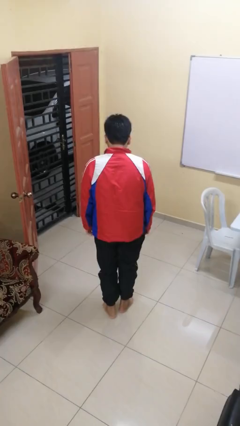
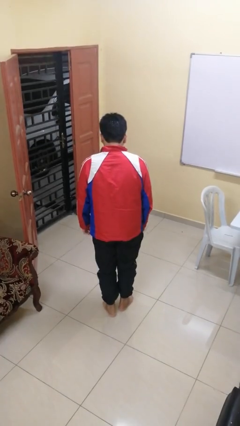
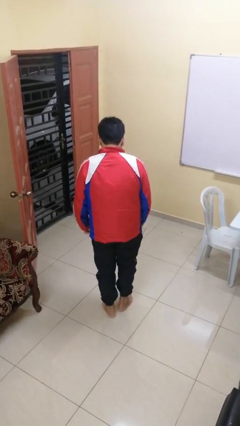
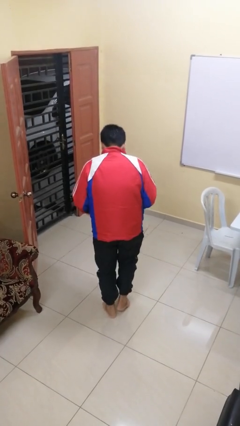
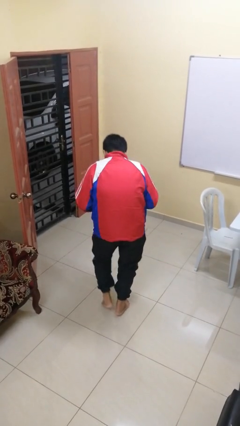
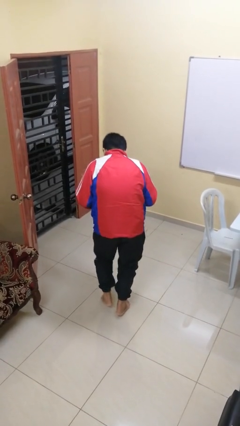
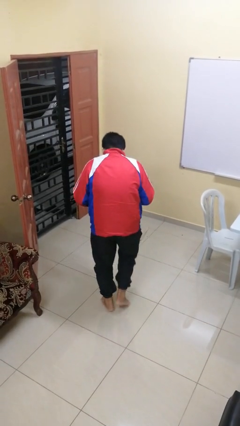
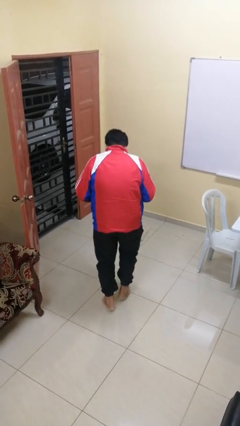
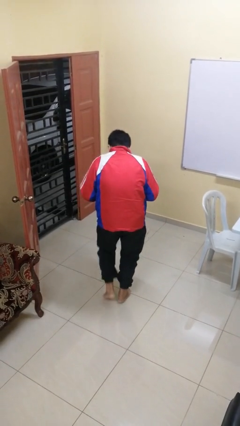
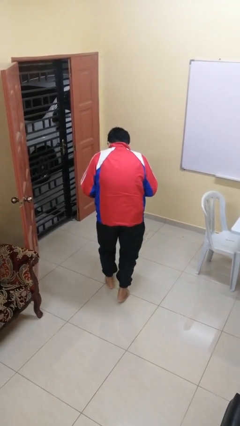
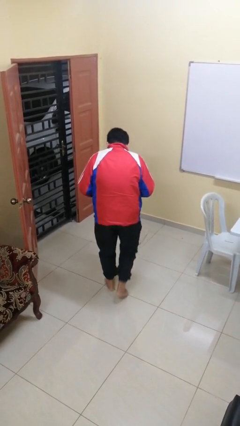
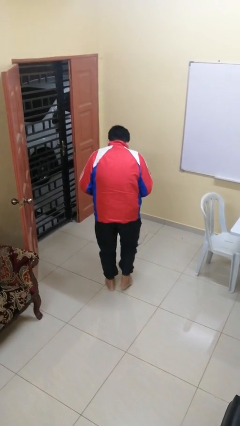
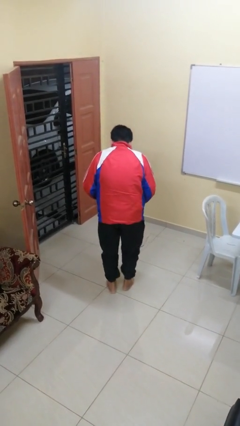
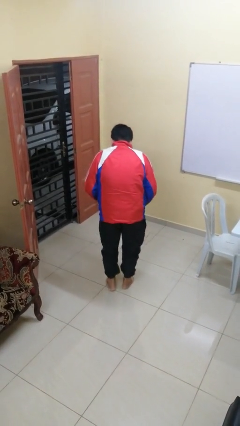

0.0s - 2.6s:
person walks tiptoe

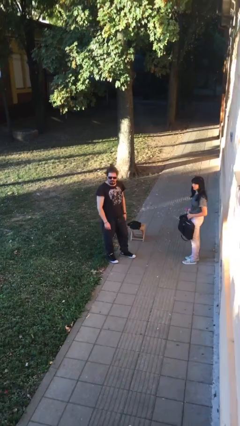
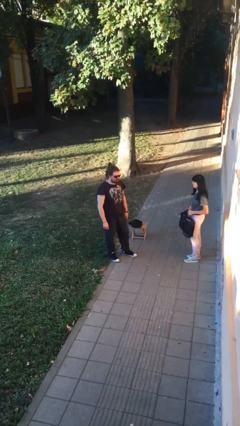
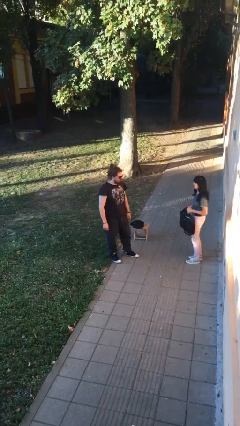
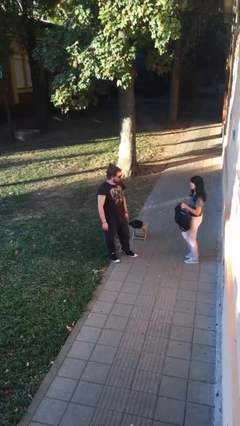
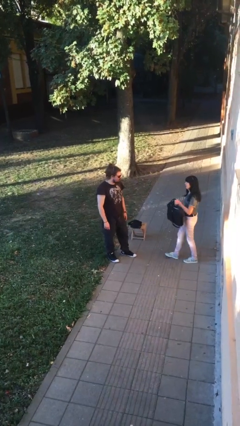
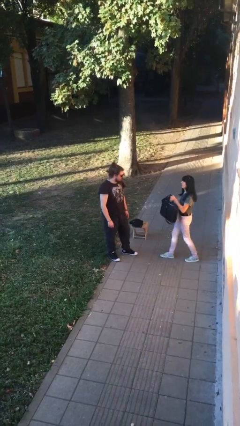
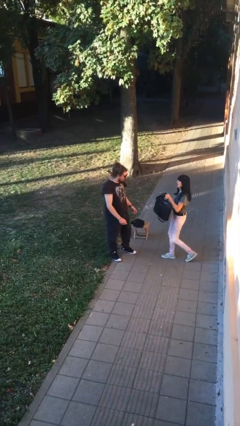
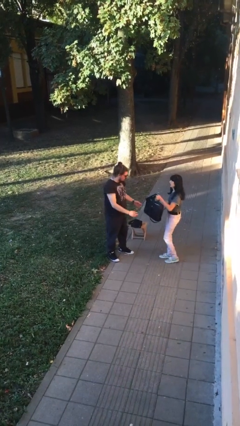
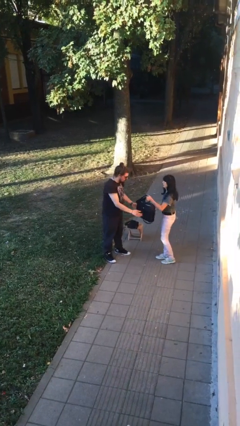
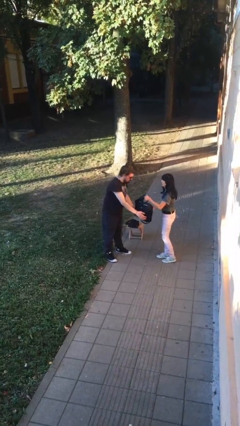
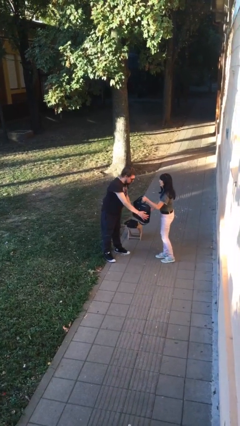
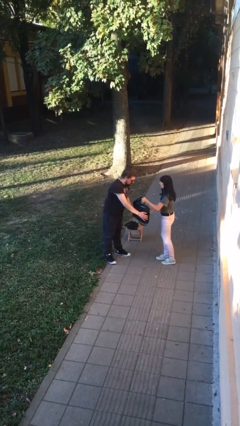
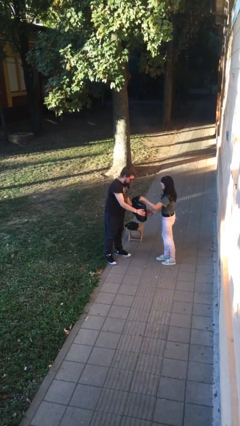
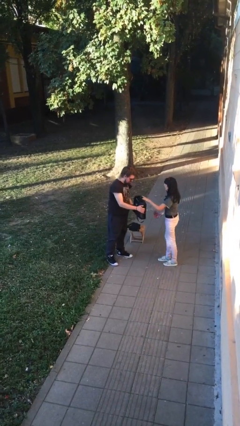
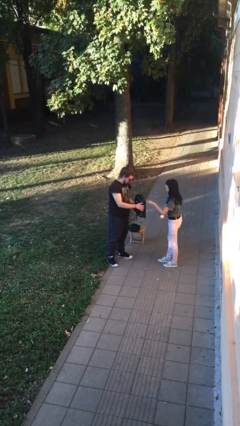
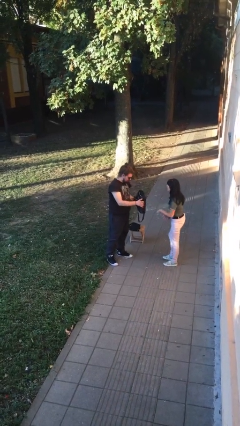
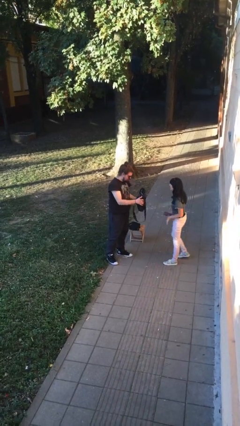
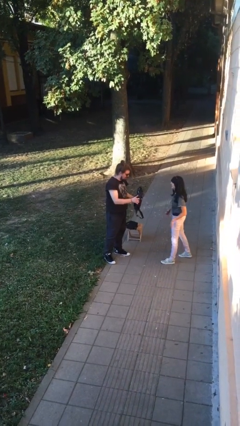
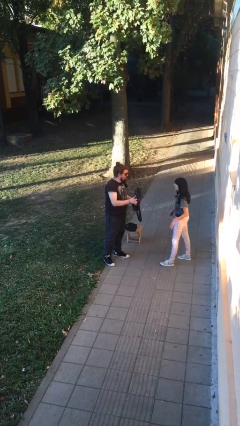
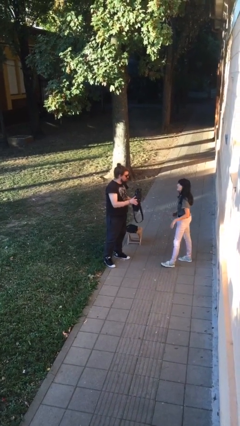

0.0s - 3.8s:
person transfers object to person

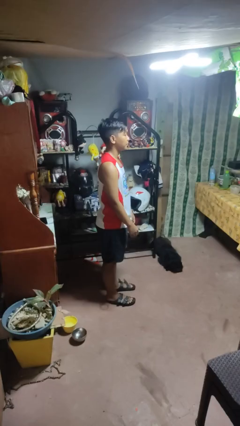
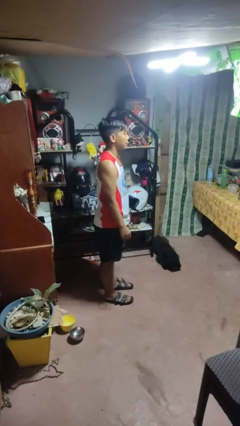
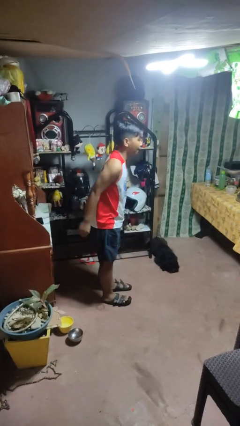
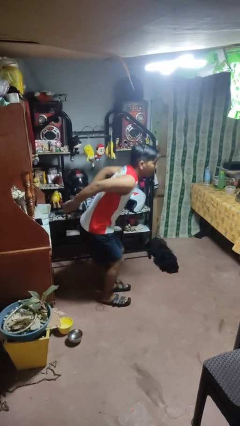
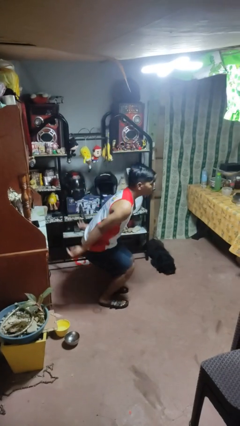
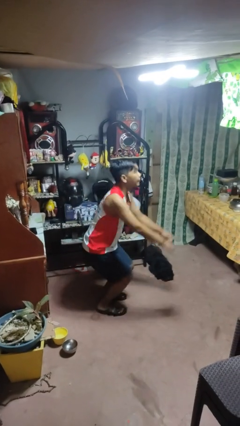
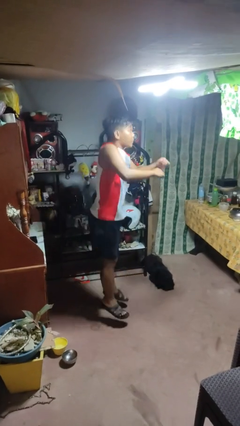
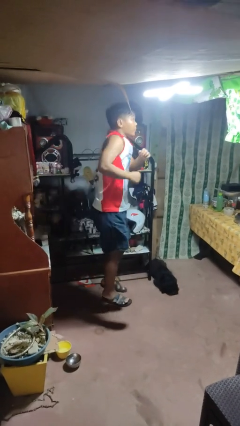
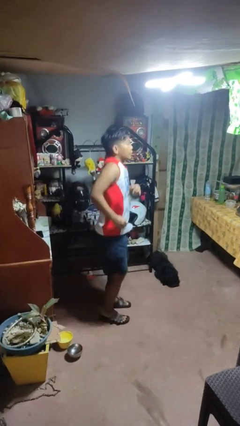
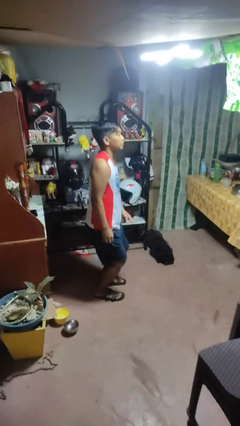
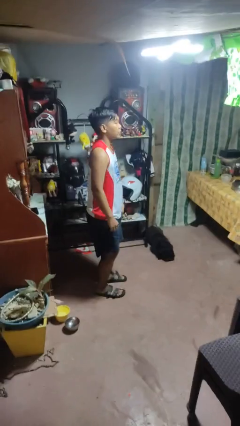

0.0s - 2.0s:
person jumps

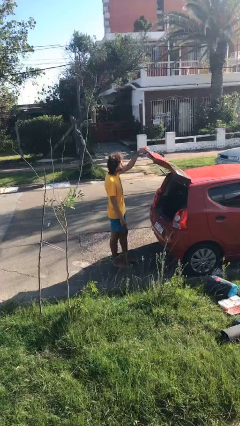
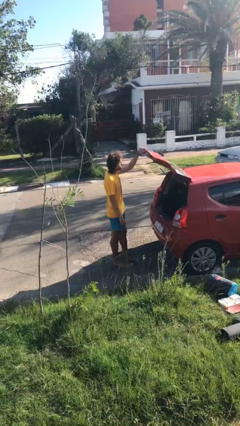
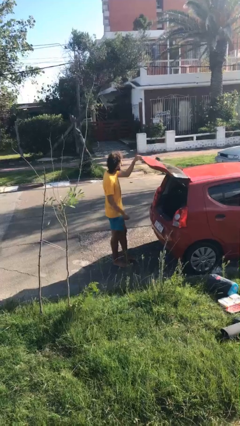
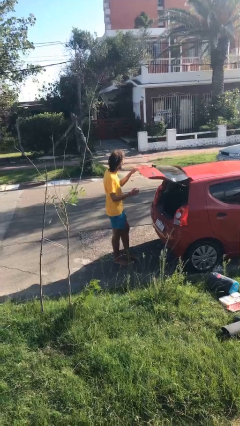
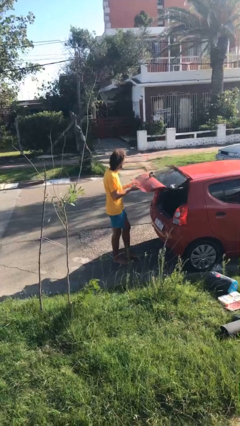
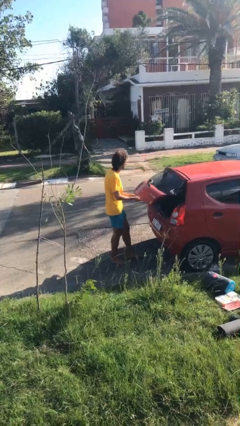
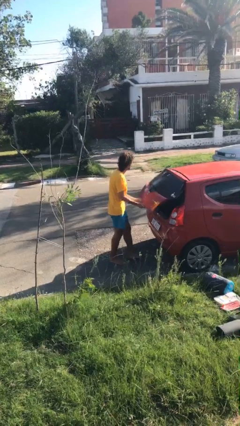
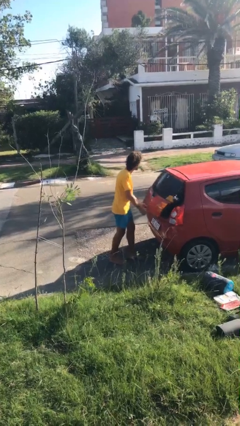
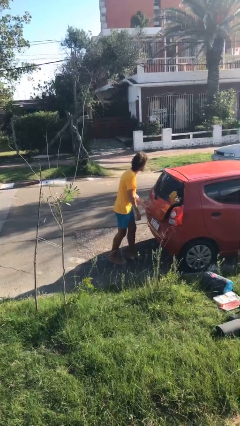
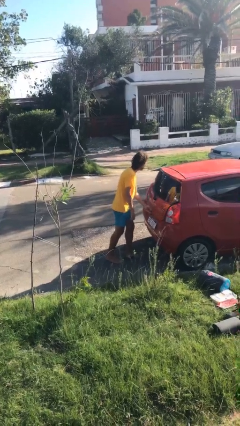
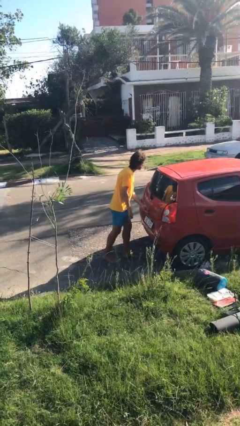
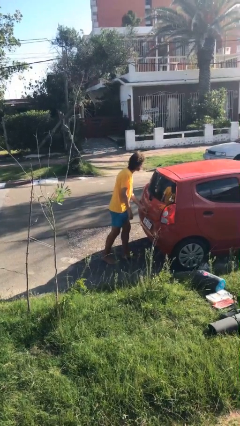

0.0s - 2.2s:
person closes car trunk

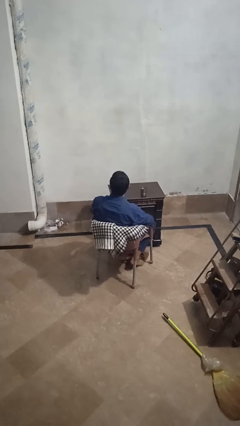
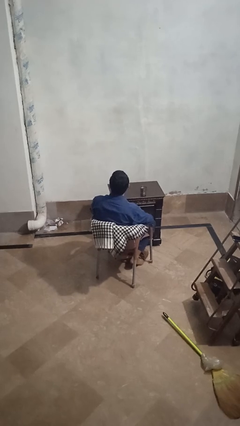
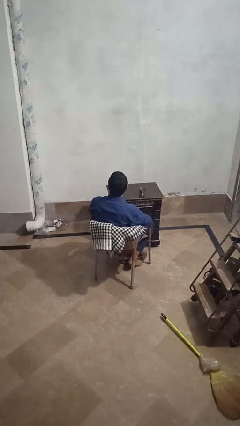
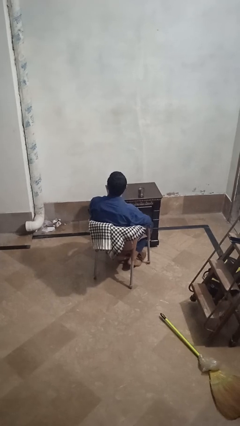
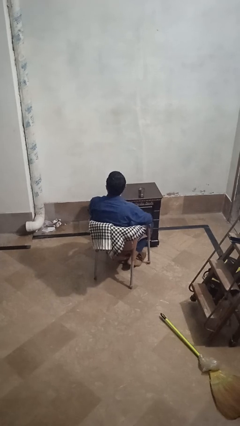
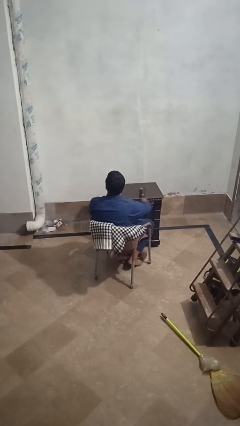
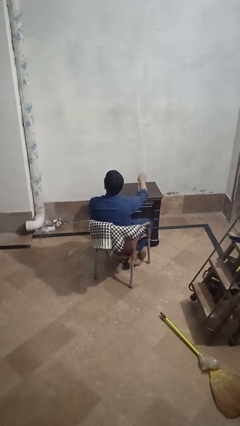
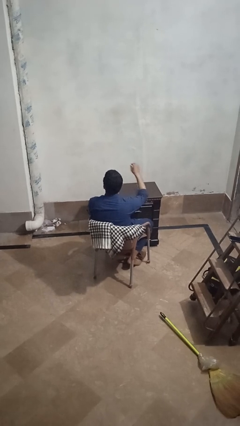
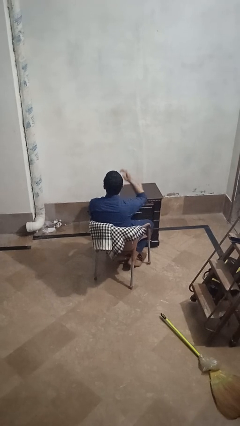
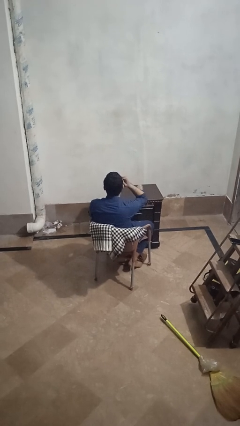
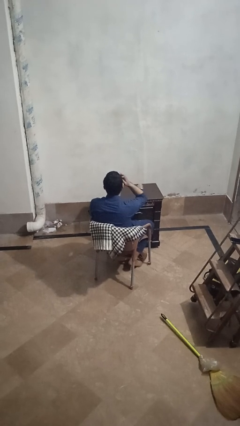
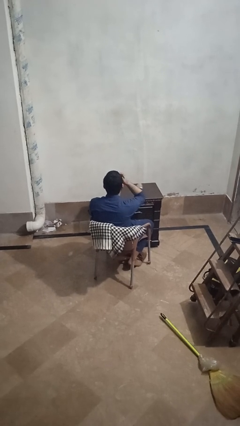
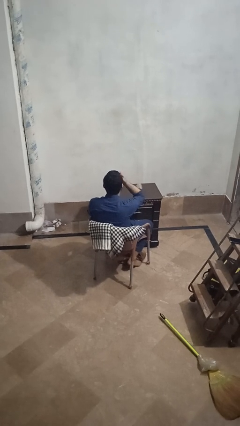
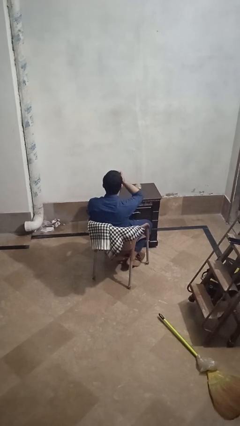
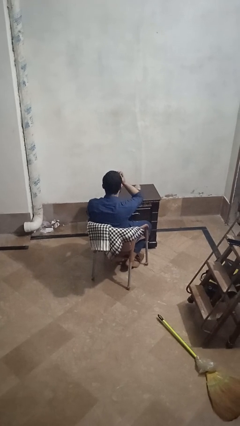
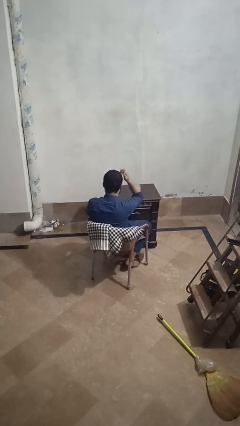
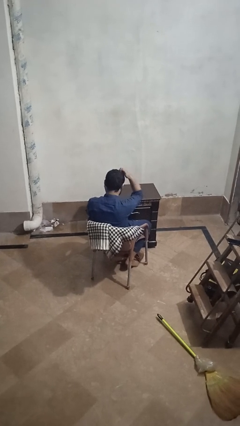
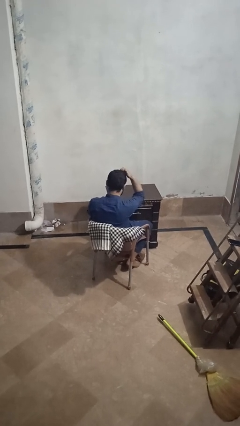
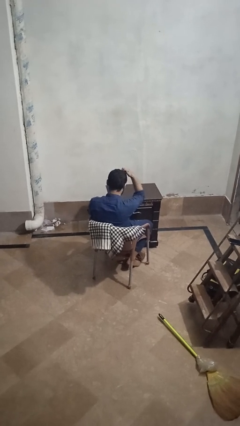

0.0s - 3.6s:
person knocks over glass

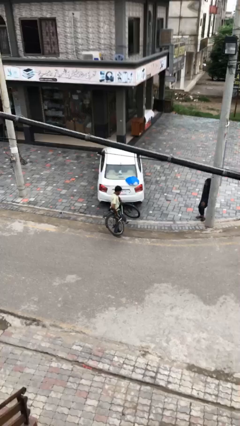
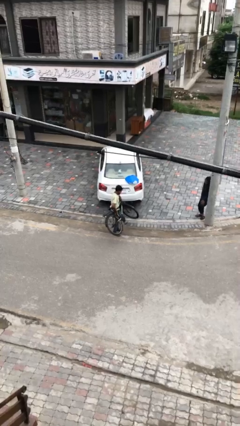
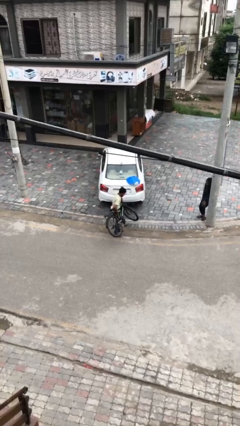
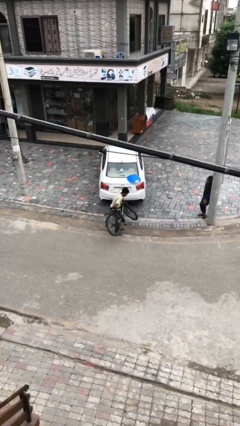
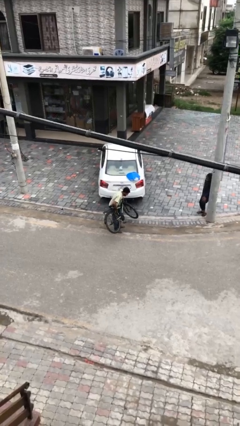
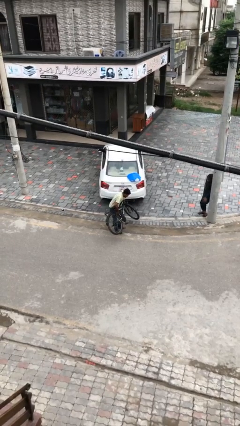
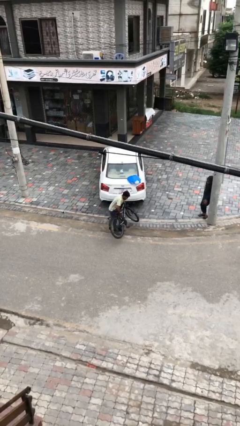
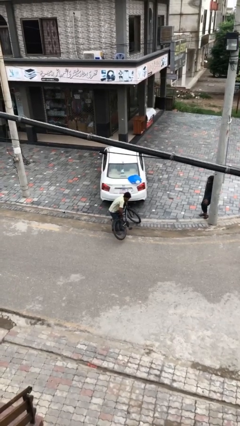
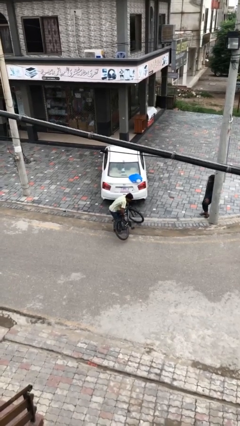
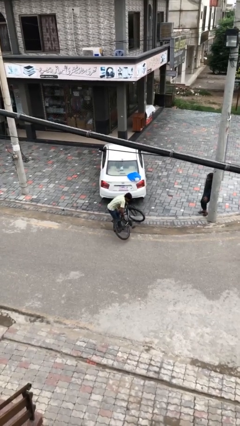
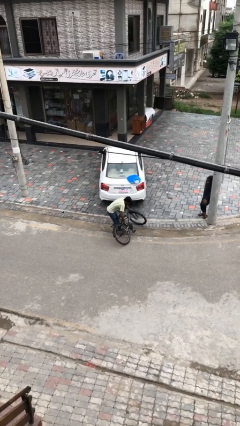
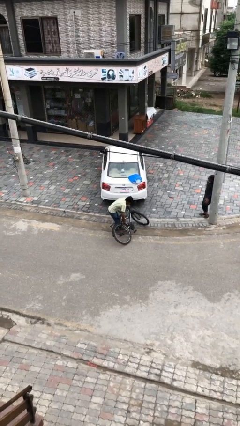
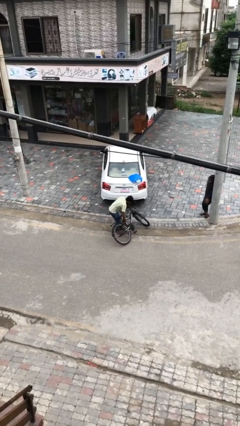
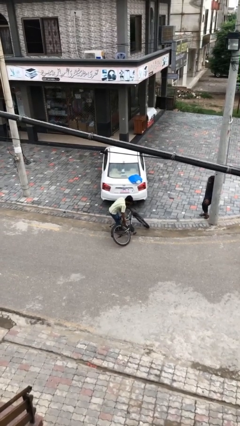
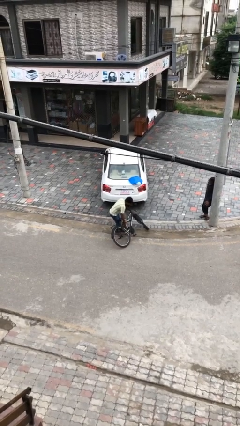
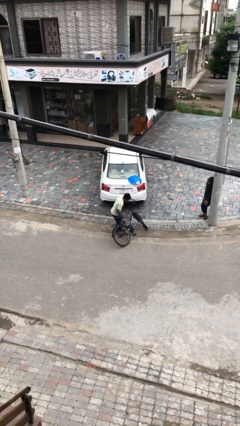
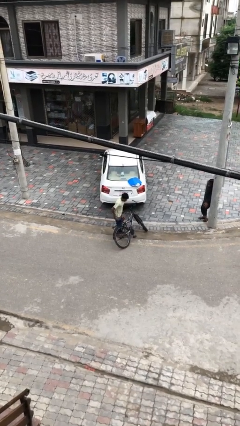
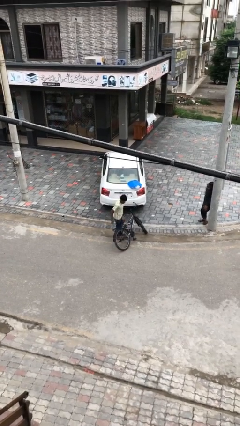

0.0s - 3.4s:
person puts down object on floor

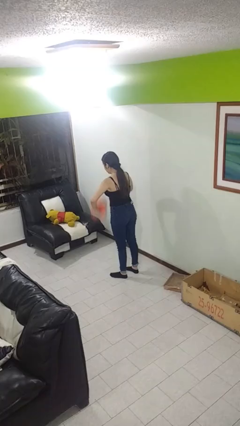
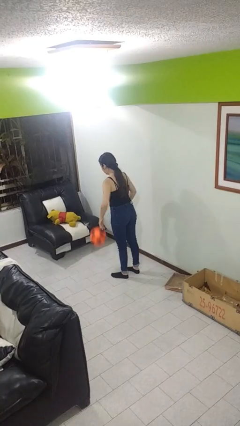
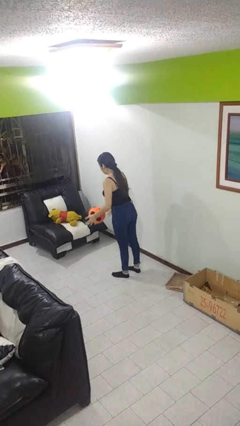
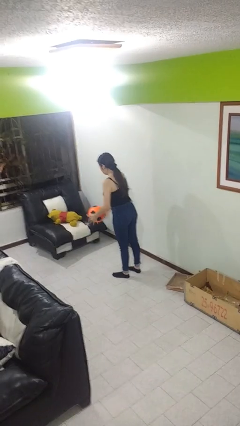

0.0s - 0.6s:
person bounces ball on floor
